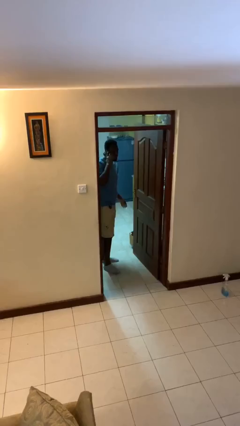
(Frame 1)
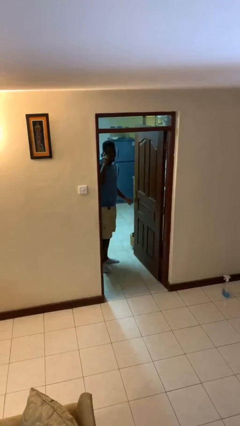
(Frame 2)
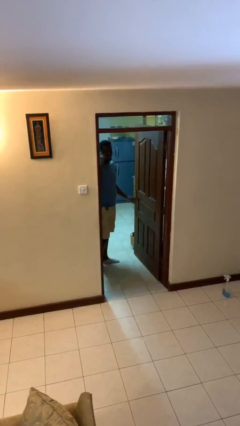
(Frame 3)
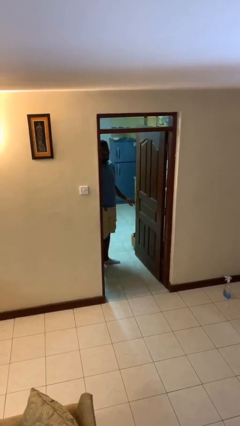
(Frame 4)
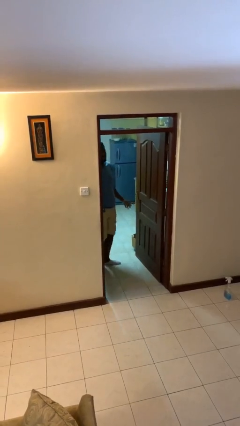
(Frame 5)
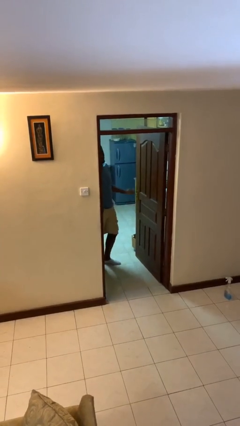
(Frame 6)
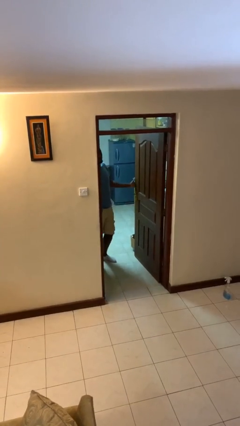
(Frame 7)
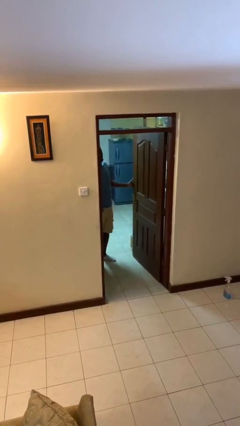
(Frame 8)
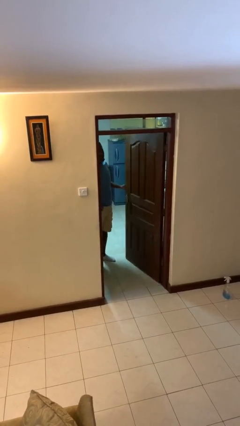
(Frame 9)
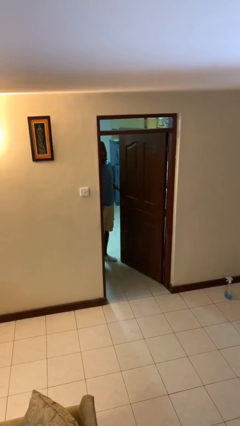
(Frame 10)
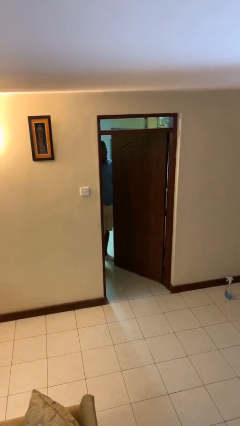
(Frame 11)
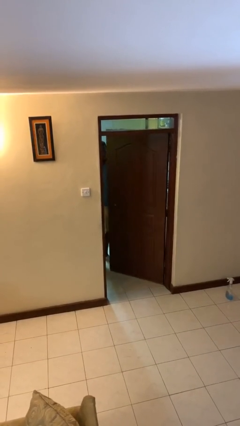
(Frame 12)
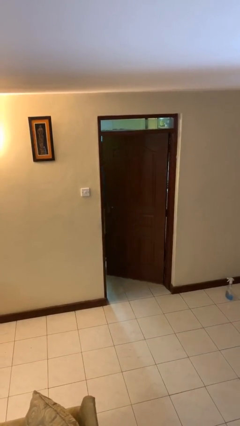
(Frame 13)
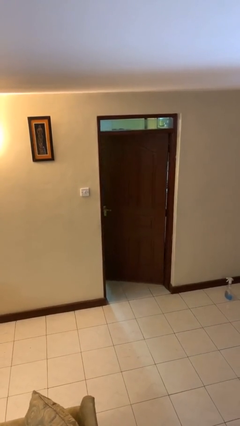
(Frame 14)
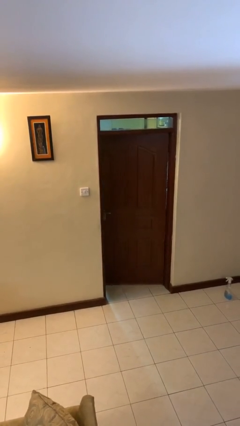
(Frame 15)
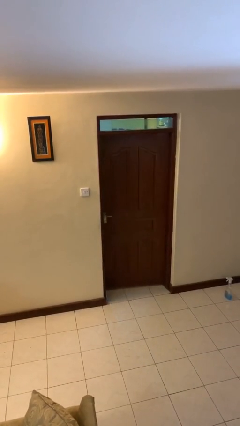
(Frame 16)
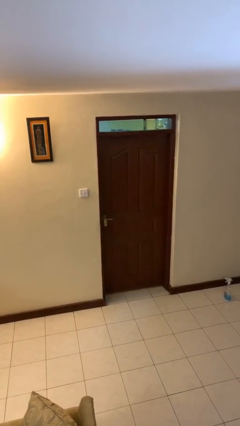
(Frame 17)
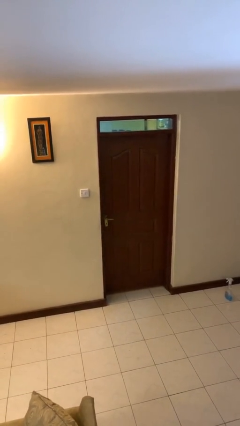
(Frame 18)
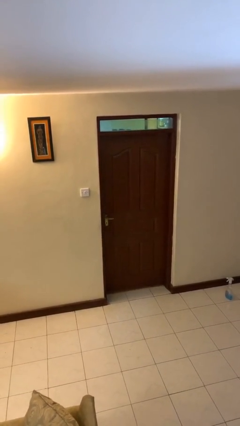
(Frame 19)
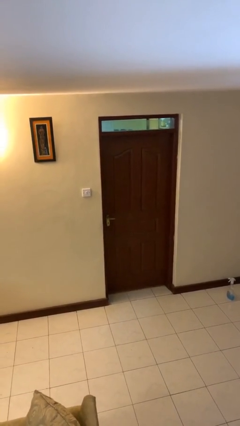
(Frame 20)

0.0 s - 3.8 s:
person closes facility door

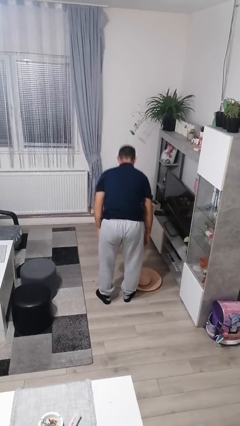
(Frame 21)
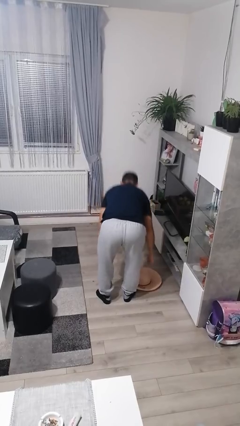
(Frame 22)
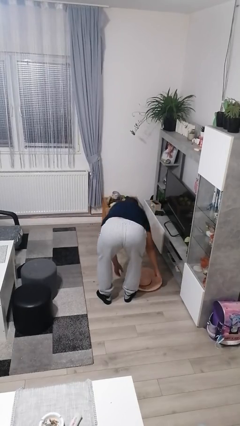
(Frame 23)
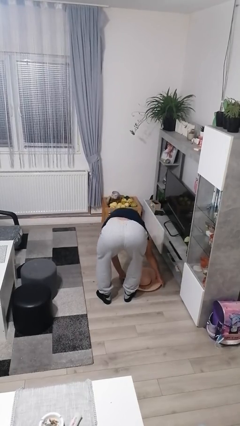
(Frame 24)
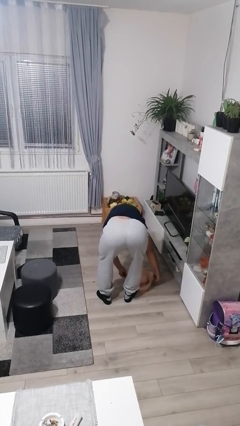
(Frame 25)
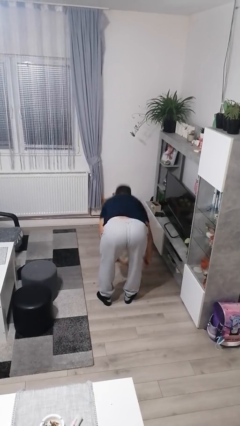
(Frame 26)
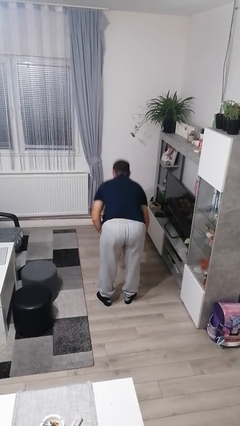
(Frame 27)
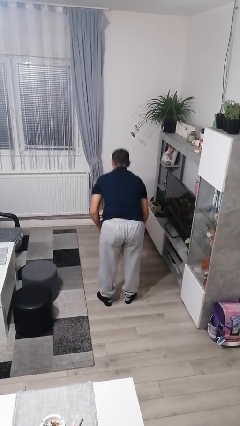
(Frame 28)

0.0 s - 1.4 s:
person picks up object from floor

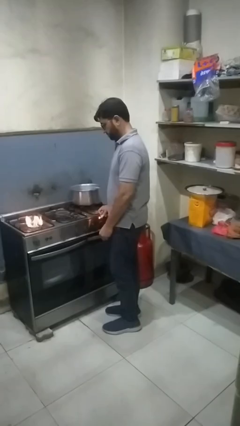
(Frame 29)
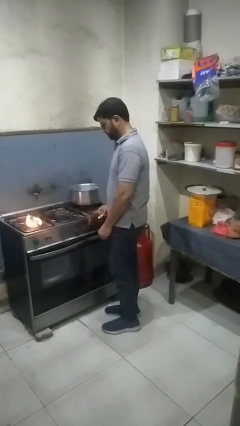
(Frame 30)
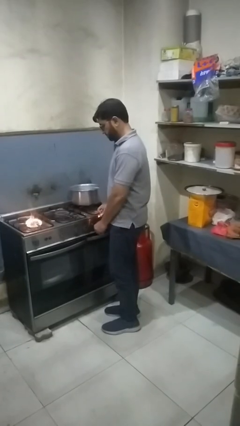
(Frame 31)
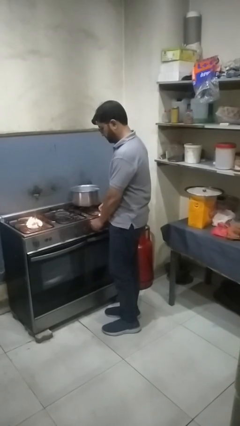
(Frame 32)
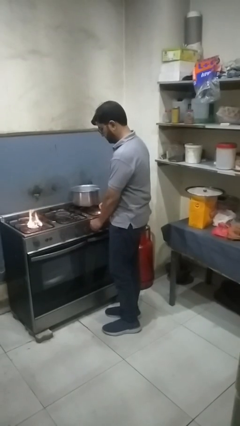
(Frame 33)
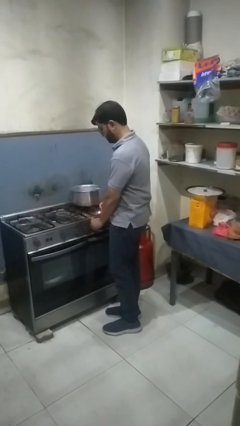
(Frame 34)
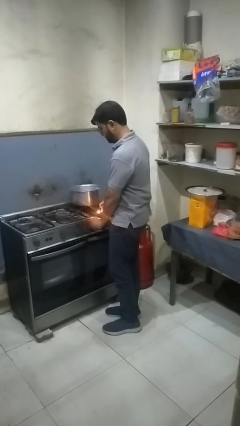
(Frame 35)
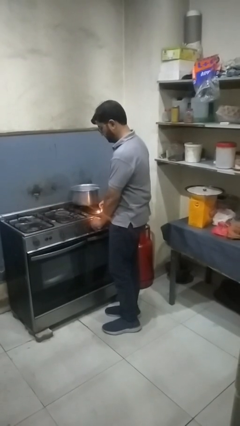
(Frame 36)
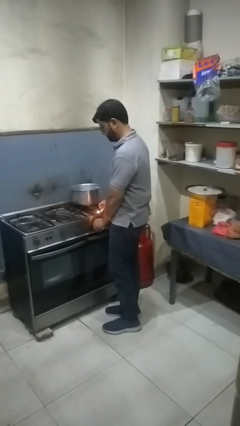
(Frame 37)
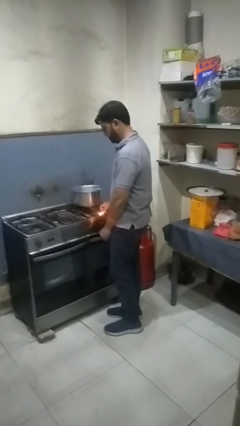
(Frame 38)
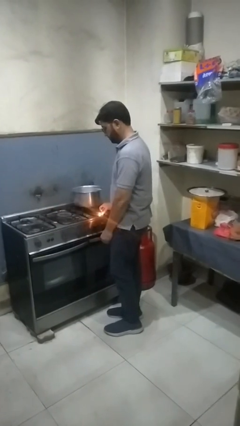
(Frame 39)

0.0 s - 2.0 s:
person turns off stovetop

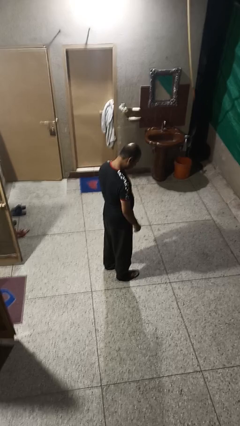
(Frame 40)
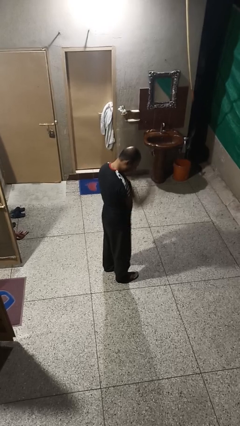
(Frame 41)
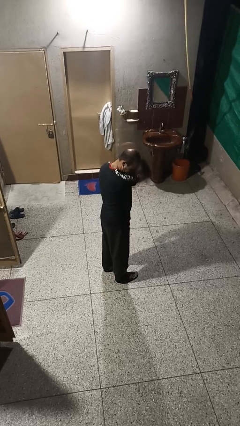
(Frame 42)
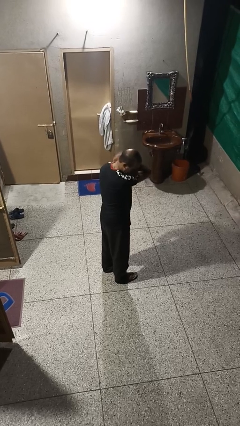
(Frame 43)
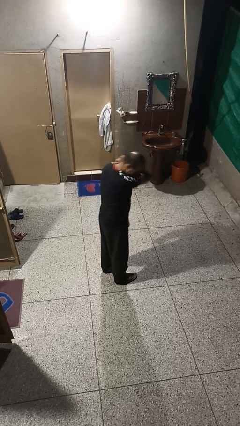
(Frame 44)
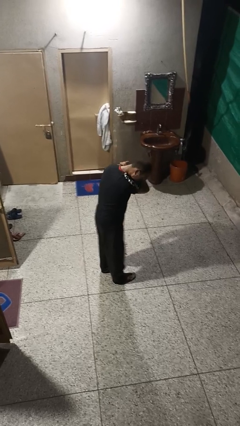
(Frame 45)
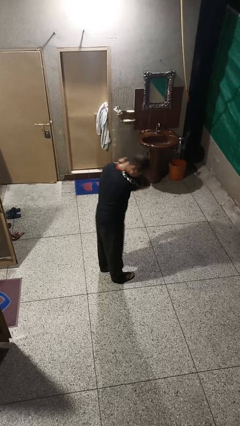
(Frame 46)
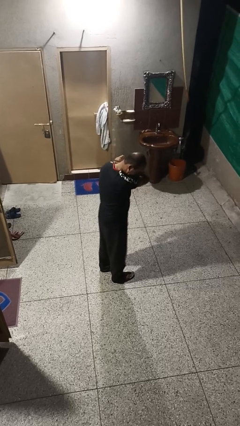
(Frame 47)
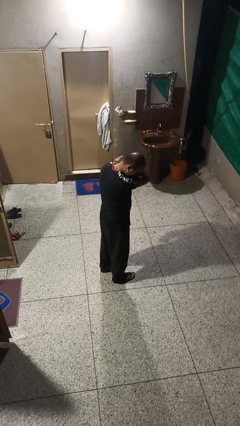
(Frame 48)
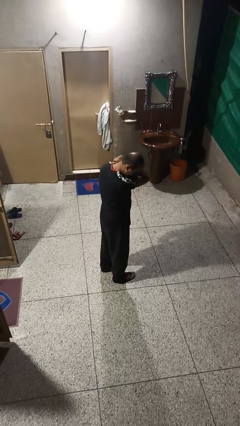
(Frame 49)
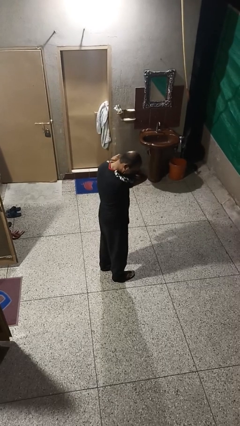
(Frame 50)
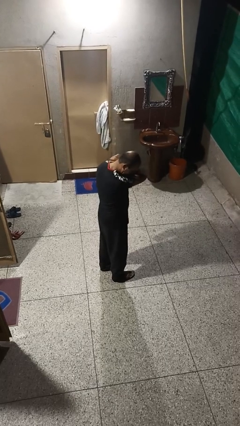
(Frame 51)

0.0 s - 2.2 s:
person sneezes into arm

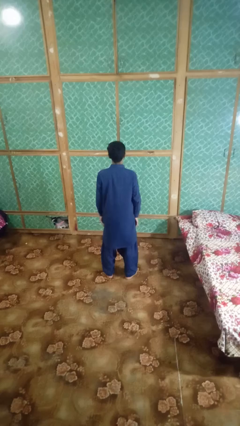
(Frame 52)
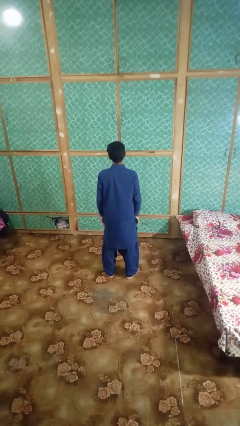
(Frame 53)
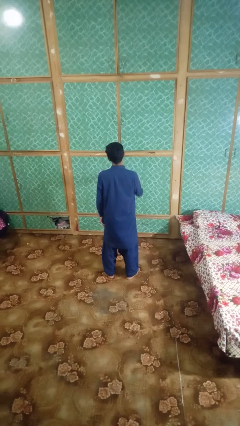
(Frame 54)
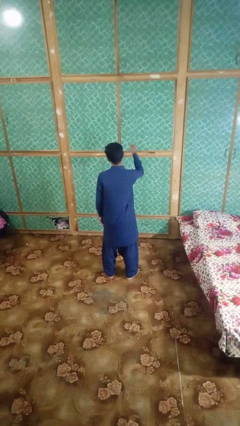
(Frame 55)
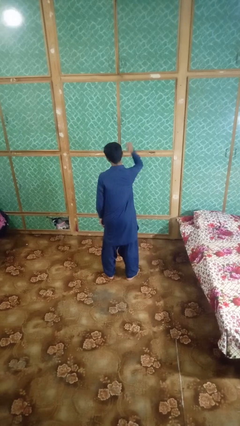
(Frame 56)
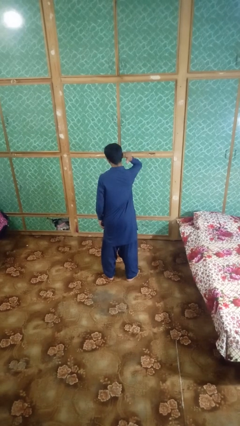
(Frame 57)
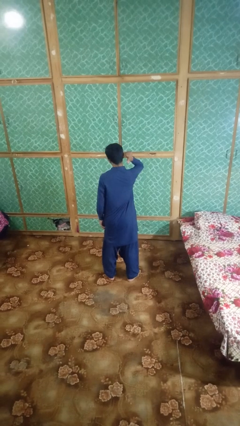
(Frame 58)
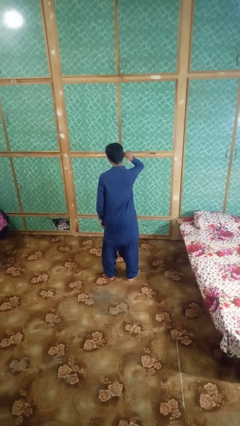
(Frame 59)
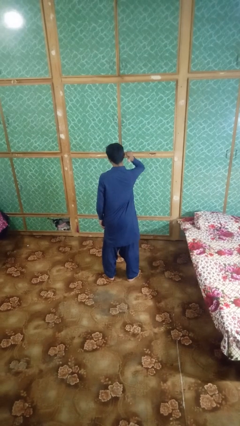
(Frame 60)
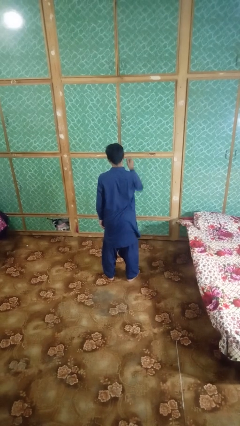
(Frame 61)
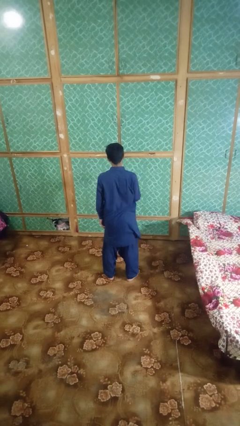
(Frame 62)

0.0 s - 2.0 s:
person gestures behind me

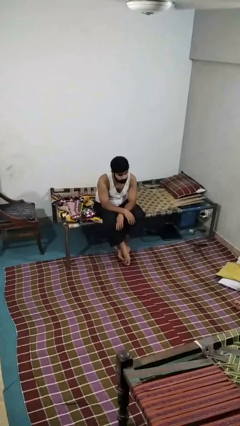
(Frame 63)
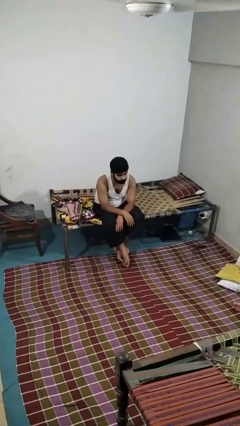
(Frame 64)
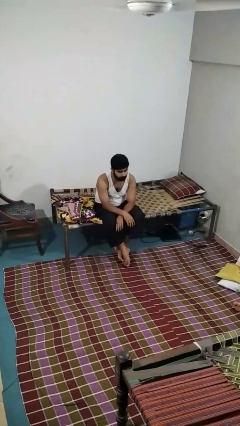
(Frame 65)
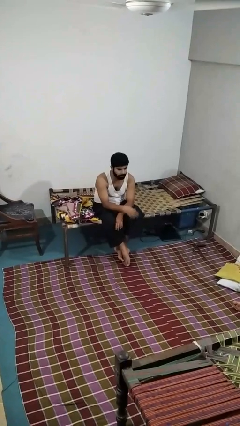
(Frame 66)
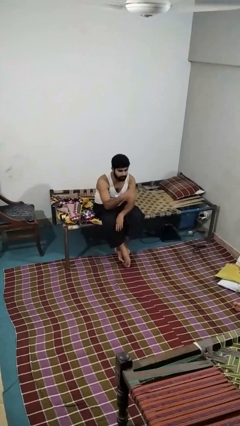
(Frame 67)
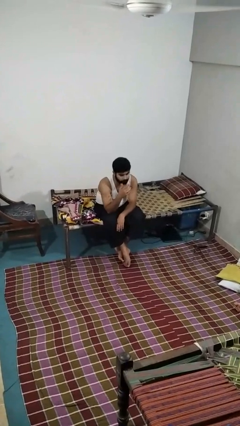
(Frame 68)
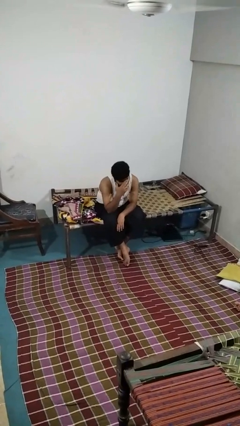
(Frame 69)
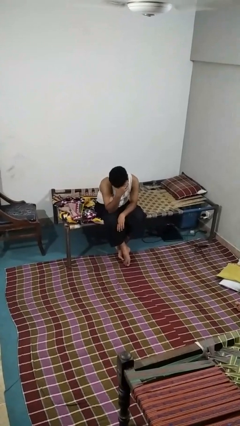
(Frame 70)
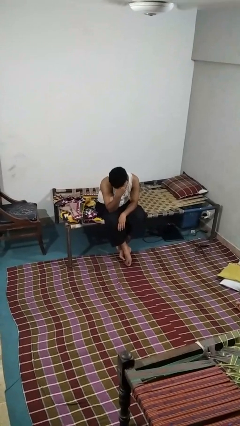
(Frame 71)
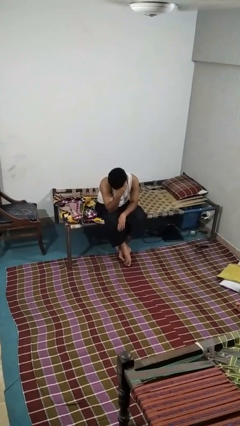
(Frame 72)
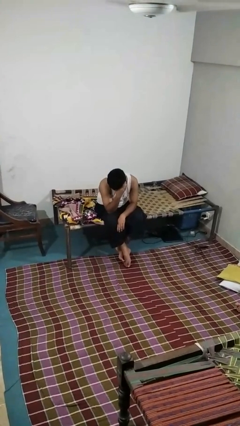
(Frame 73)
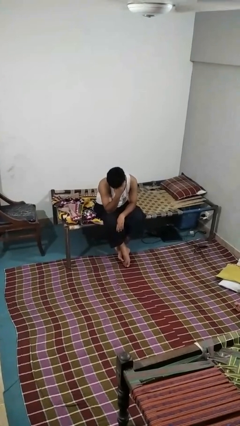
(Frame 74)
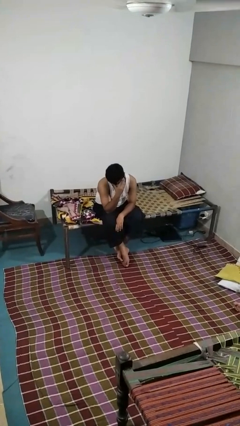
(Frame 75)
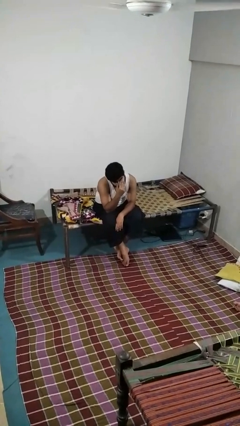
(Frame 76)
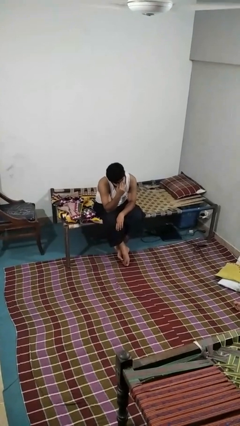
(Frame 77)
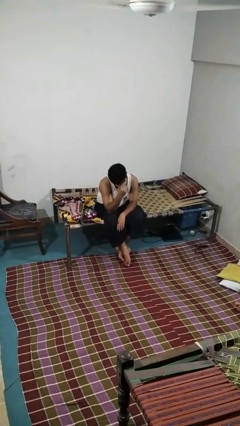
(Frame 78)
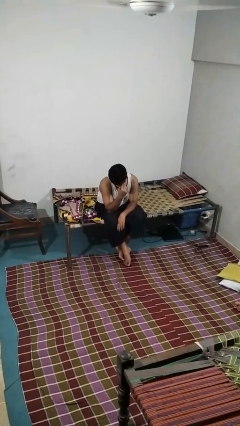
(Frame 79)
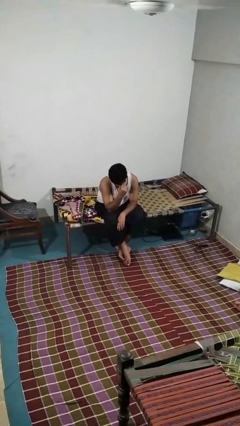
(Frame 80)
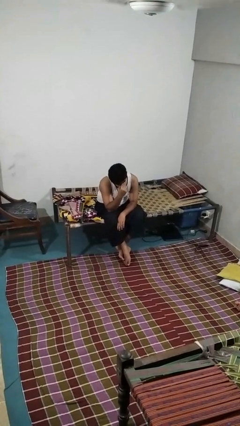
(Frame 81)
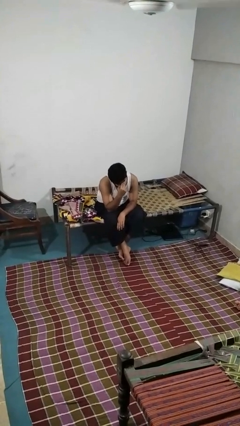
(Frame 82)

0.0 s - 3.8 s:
person covers face with hands

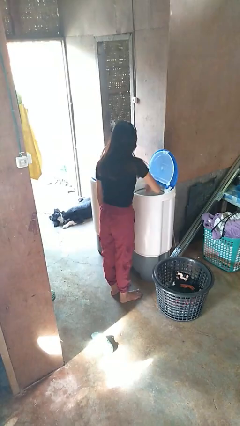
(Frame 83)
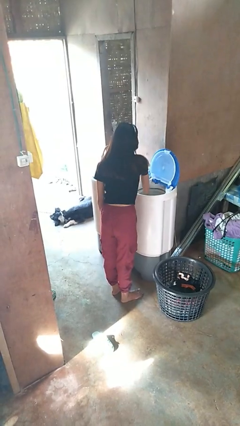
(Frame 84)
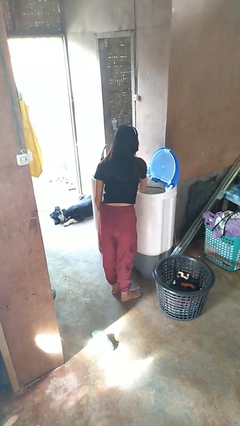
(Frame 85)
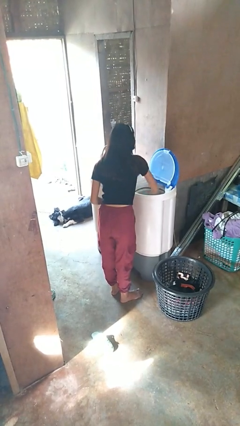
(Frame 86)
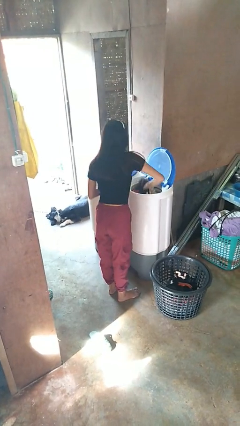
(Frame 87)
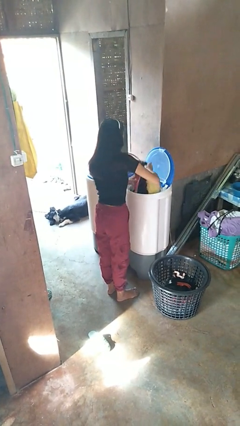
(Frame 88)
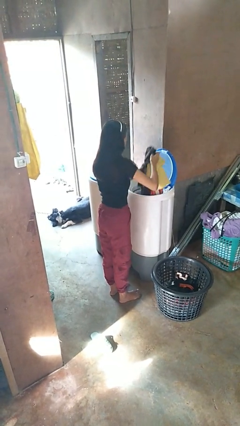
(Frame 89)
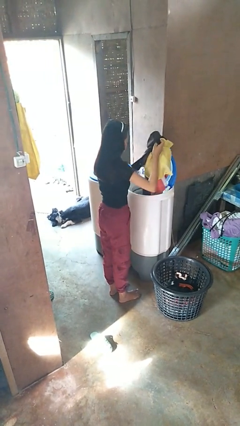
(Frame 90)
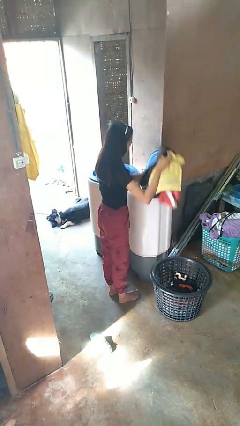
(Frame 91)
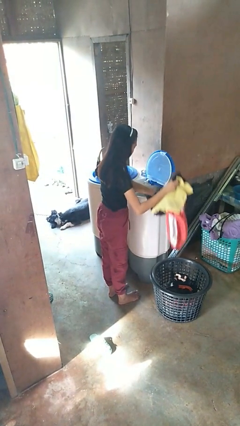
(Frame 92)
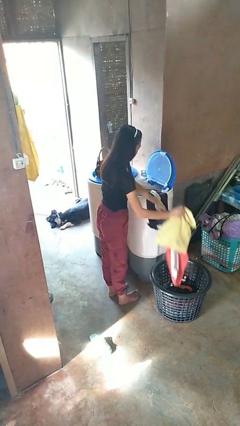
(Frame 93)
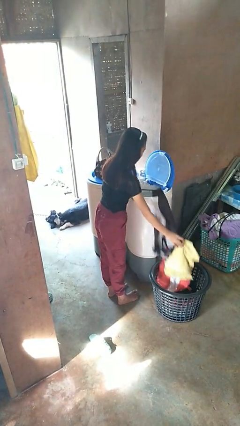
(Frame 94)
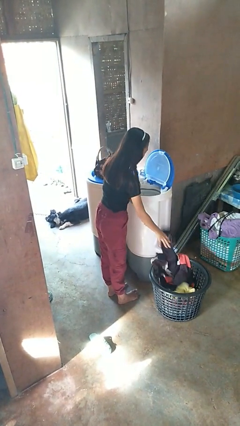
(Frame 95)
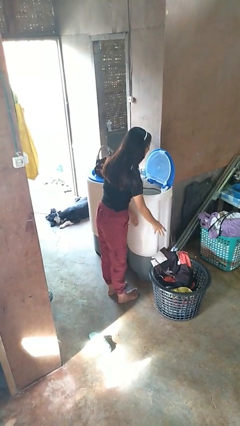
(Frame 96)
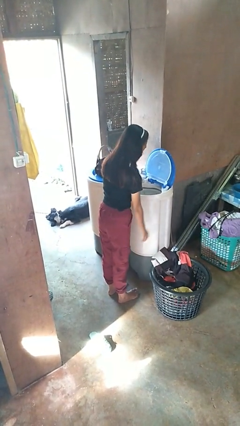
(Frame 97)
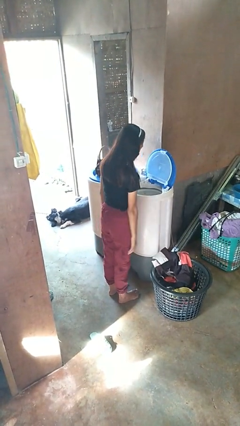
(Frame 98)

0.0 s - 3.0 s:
person unloads clotheswasher
